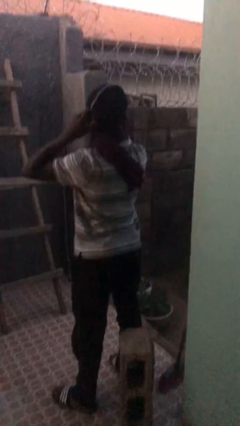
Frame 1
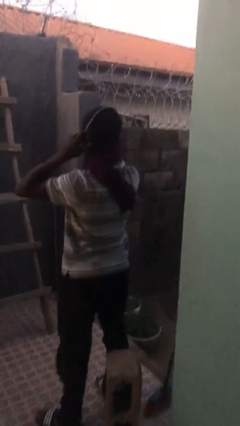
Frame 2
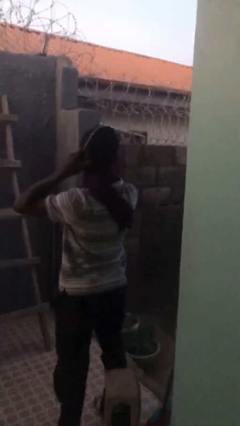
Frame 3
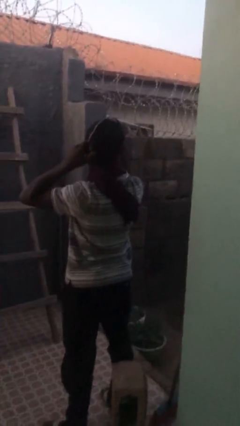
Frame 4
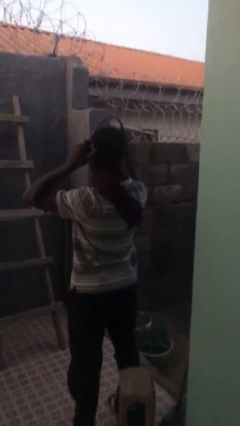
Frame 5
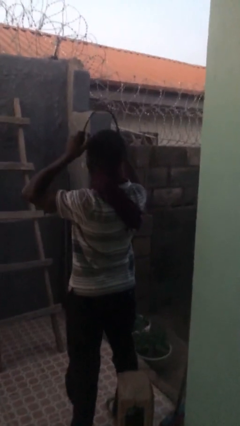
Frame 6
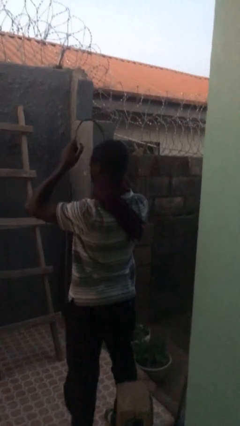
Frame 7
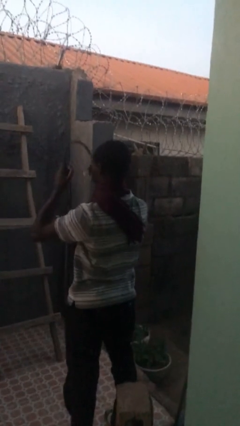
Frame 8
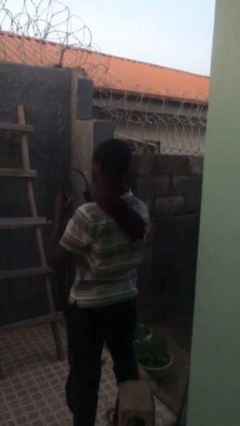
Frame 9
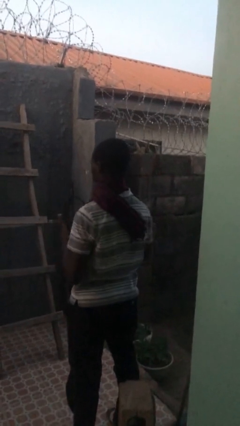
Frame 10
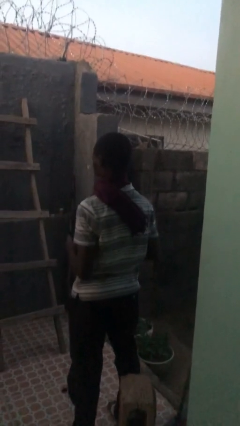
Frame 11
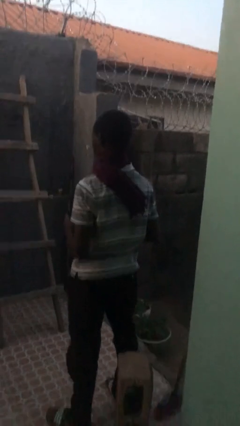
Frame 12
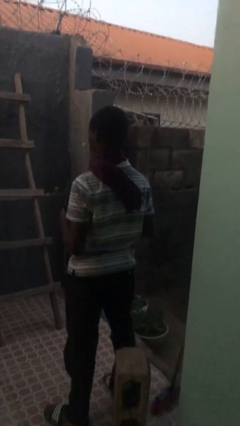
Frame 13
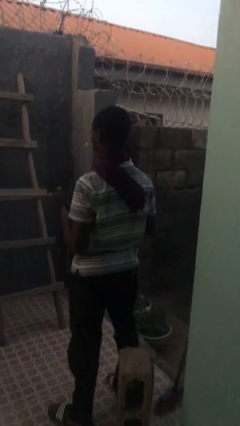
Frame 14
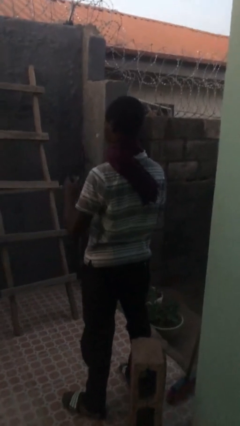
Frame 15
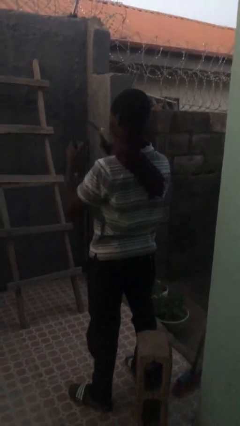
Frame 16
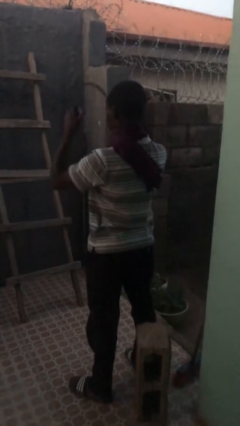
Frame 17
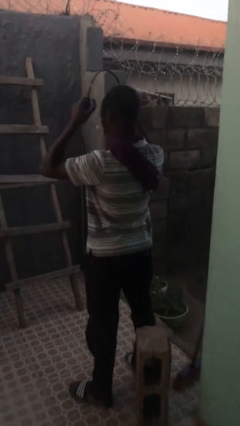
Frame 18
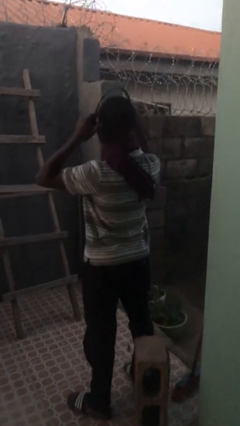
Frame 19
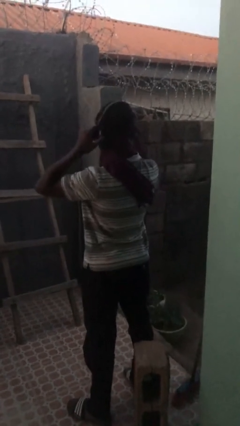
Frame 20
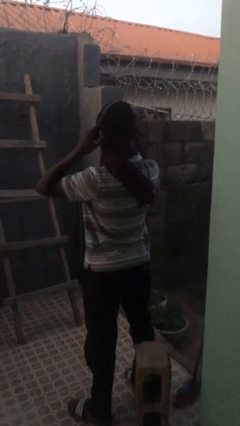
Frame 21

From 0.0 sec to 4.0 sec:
person takes off headphones

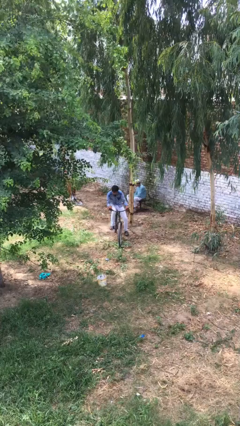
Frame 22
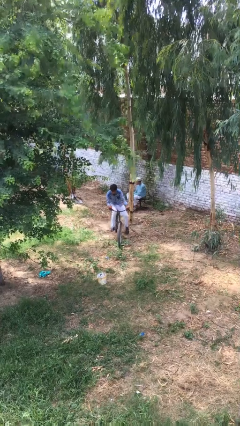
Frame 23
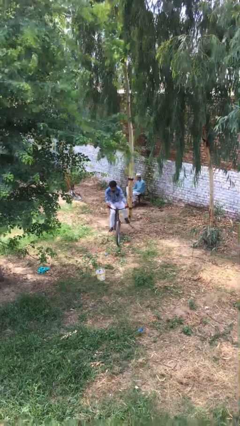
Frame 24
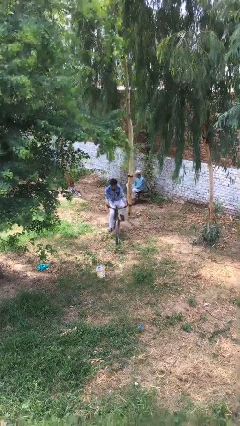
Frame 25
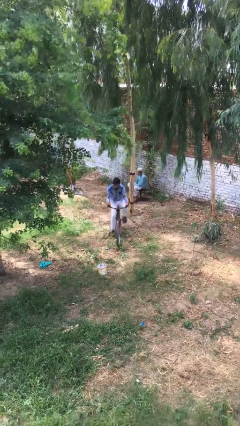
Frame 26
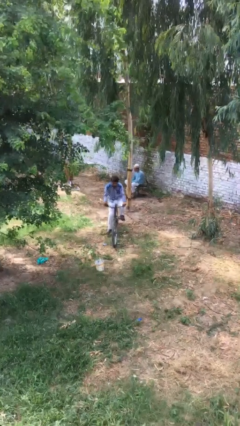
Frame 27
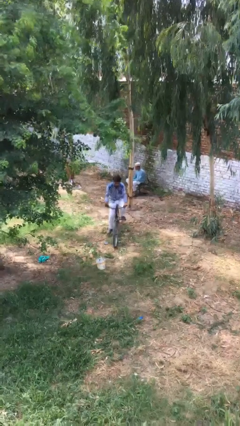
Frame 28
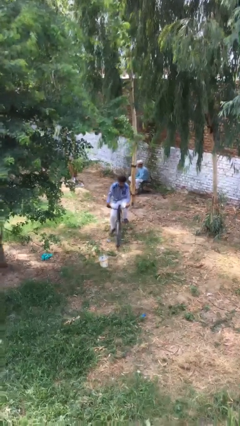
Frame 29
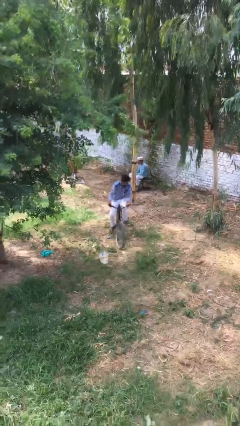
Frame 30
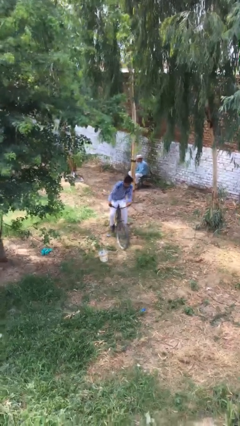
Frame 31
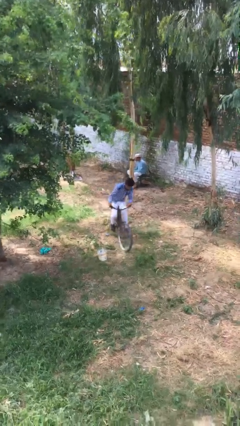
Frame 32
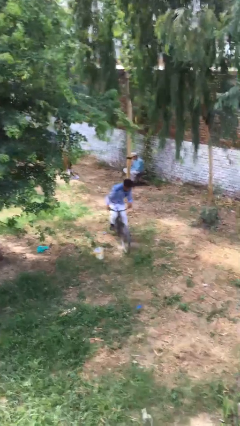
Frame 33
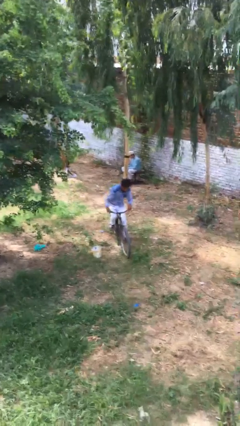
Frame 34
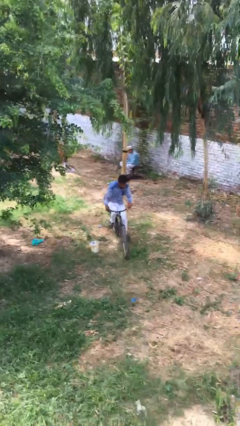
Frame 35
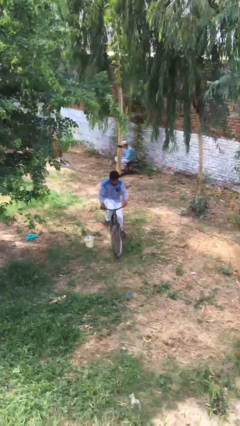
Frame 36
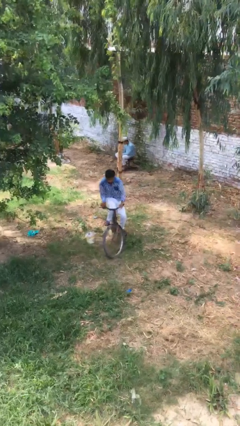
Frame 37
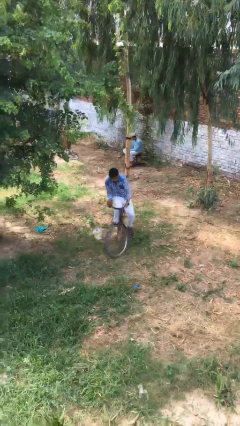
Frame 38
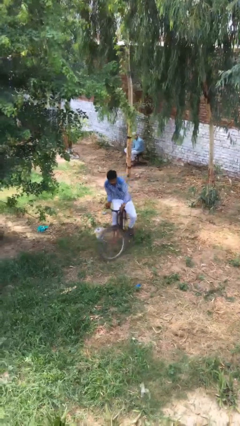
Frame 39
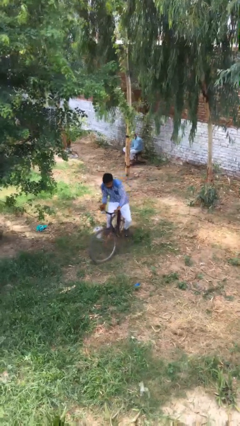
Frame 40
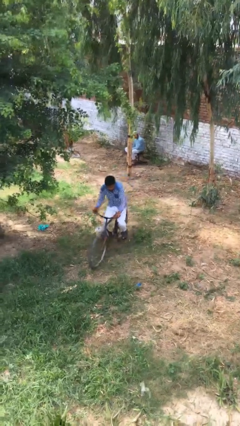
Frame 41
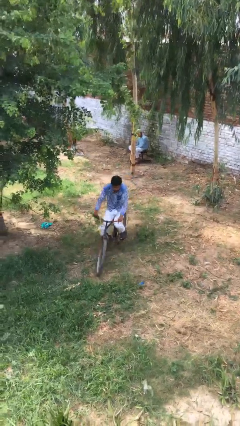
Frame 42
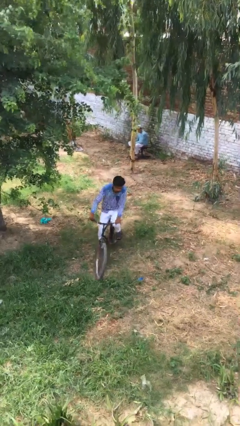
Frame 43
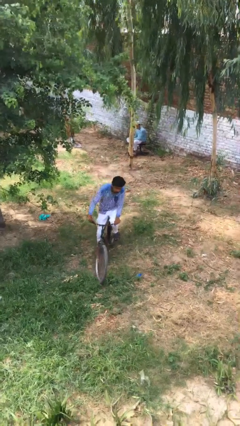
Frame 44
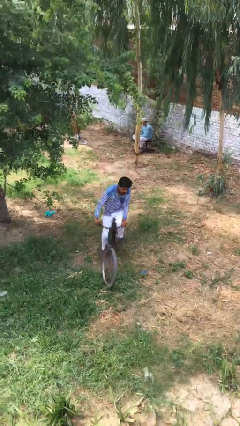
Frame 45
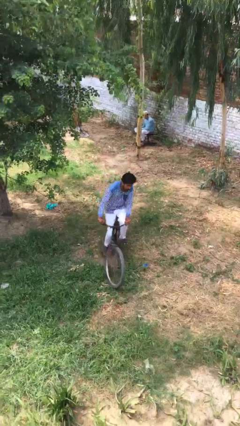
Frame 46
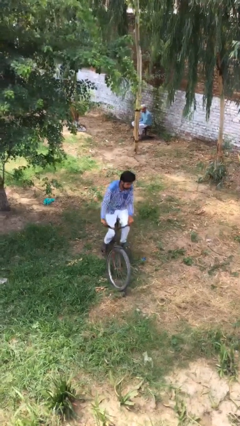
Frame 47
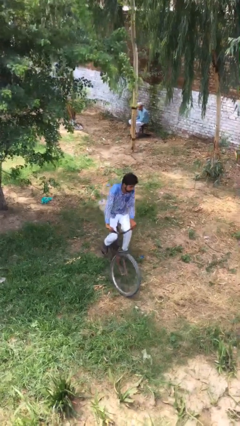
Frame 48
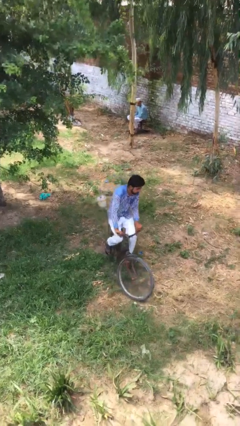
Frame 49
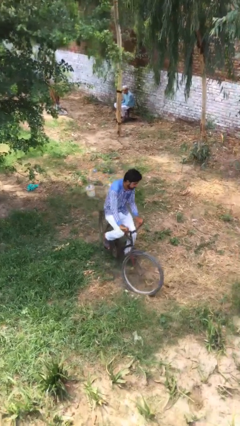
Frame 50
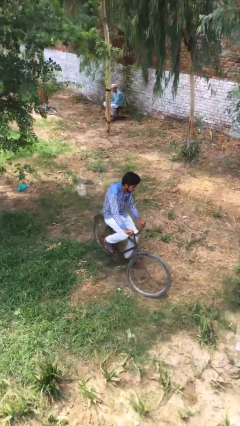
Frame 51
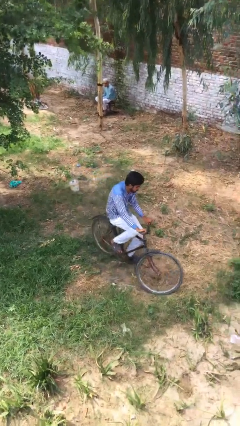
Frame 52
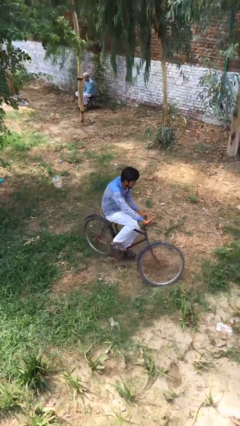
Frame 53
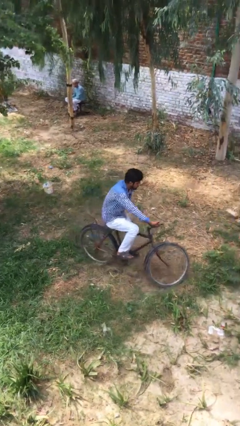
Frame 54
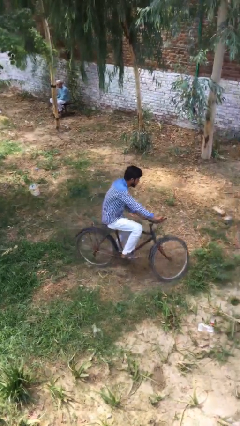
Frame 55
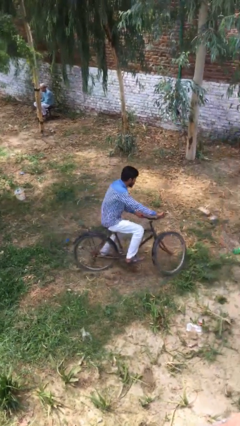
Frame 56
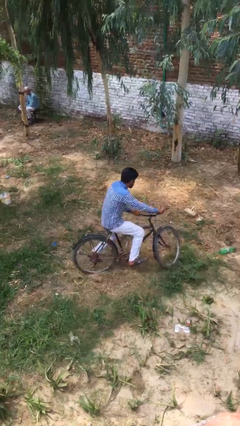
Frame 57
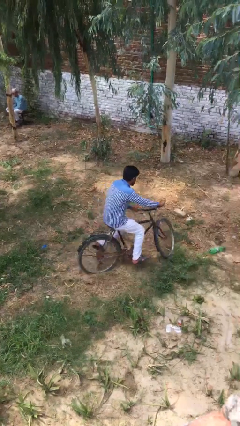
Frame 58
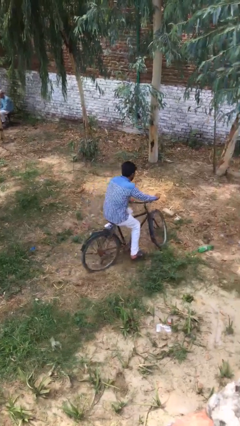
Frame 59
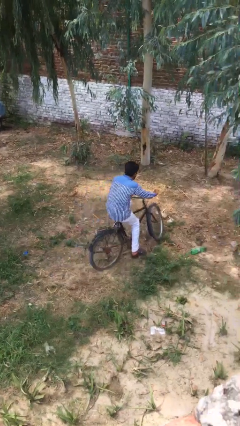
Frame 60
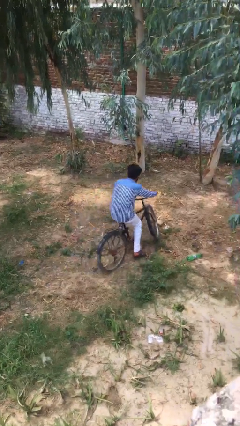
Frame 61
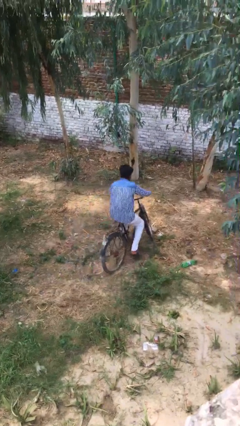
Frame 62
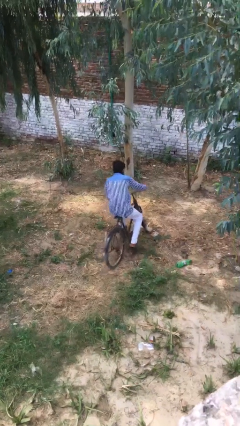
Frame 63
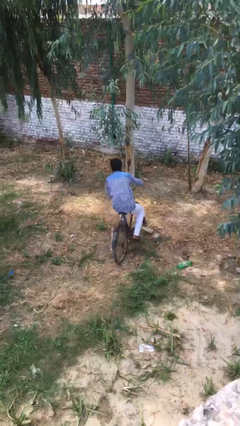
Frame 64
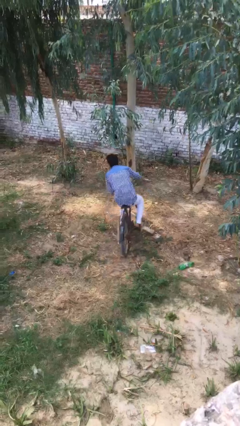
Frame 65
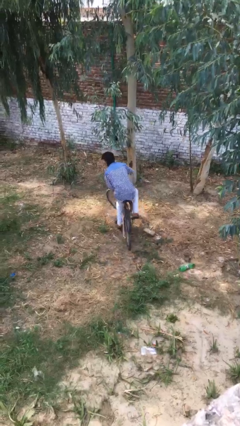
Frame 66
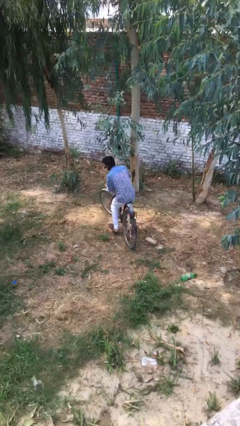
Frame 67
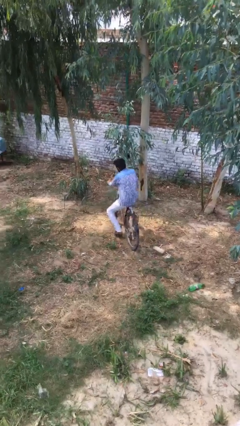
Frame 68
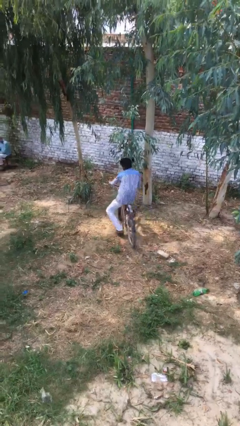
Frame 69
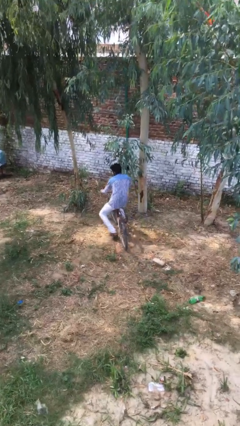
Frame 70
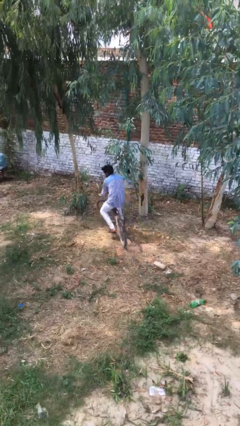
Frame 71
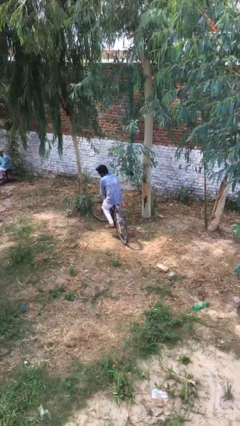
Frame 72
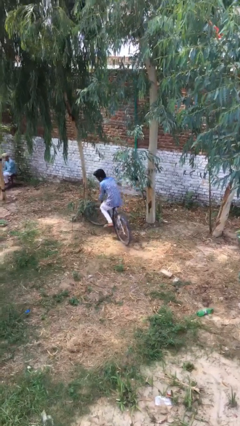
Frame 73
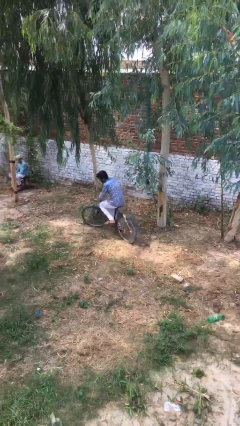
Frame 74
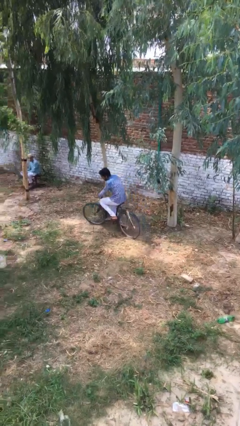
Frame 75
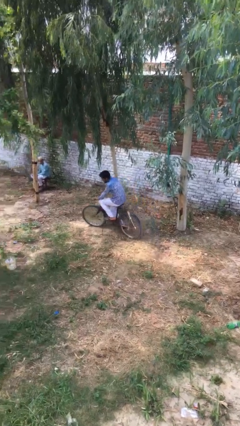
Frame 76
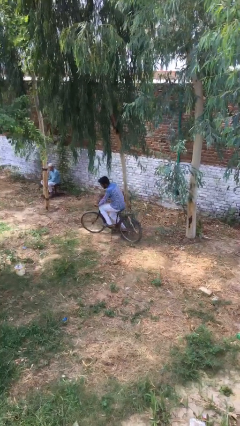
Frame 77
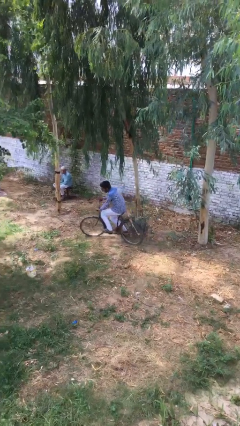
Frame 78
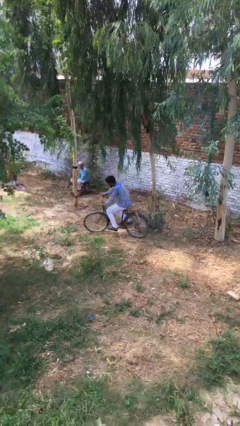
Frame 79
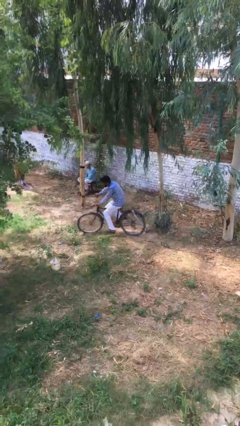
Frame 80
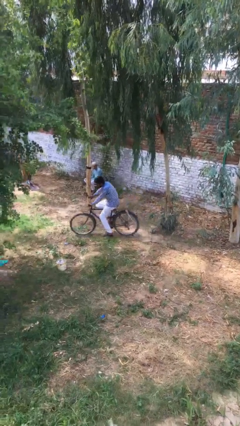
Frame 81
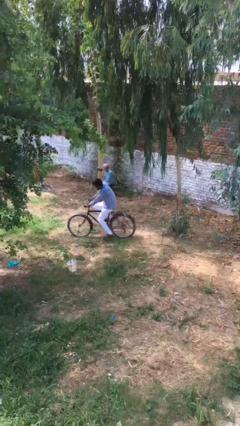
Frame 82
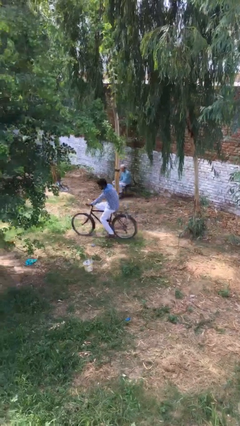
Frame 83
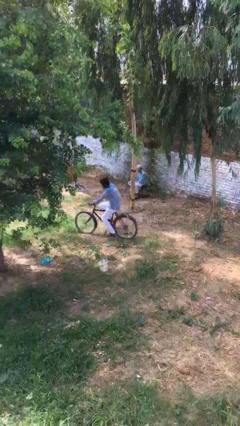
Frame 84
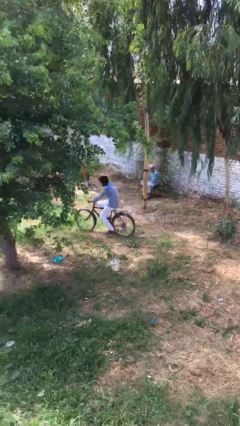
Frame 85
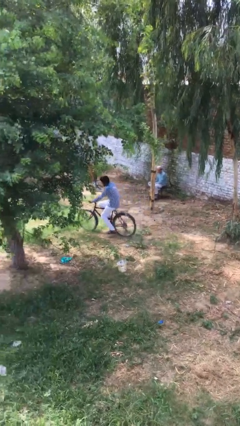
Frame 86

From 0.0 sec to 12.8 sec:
person rides bicycle

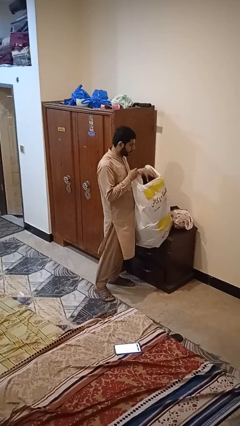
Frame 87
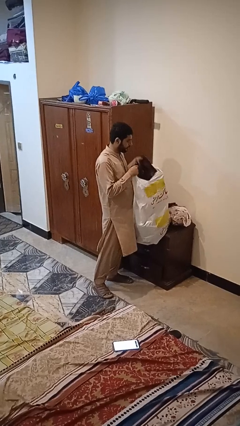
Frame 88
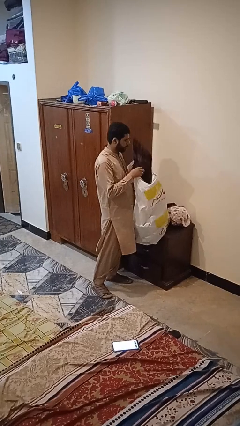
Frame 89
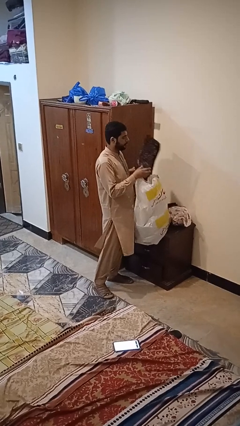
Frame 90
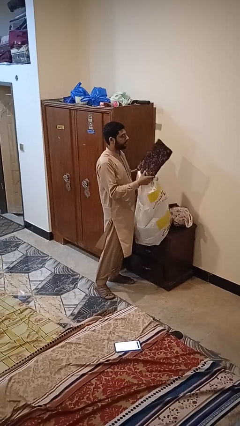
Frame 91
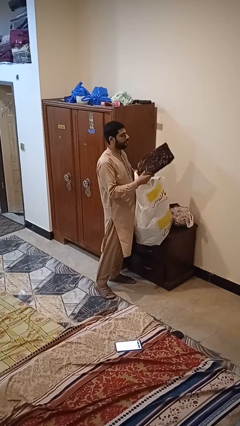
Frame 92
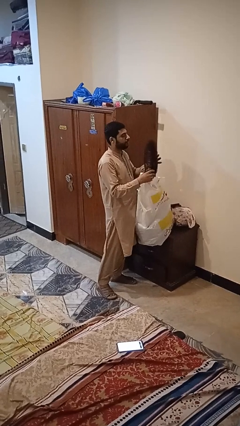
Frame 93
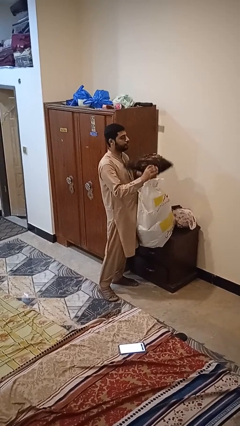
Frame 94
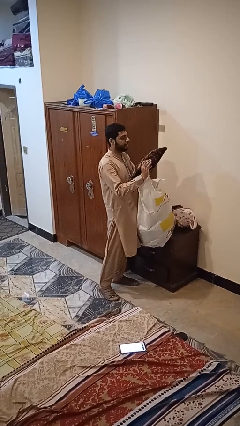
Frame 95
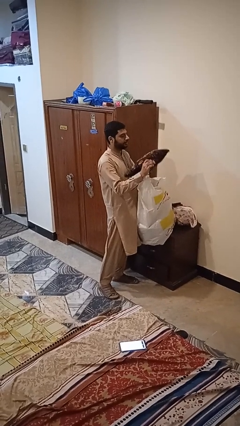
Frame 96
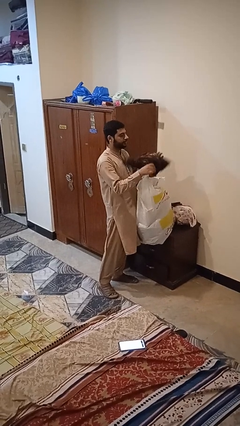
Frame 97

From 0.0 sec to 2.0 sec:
person takes object from bag
